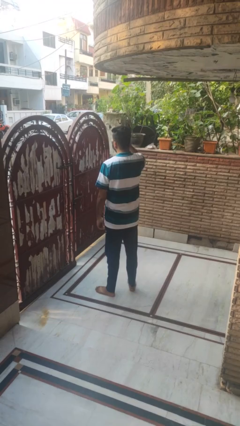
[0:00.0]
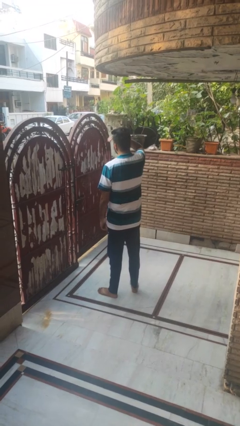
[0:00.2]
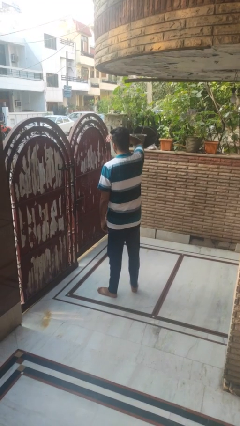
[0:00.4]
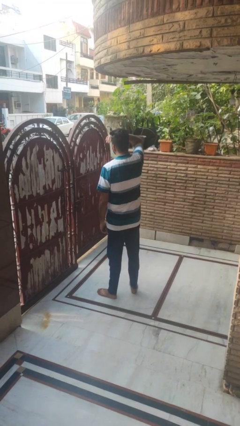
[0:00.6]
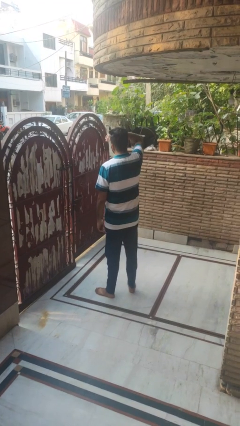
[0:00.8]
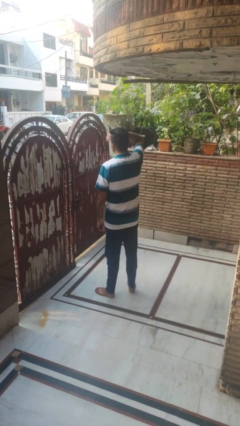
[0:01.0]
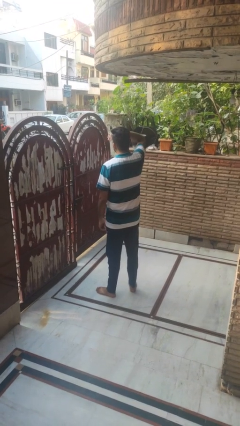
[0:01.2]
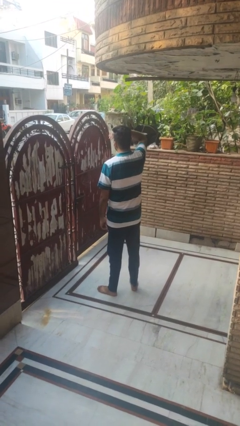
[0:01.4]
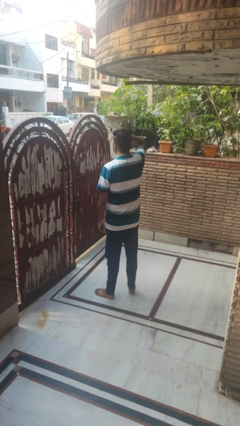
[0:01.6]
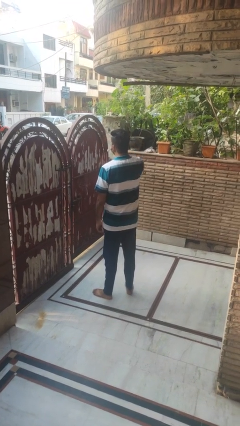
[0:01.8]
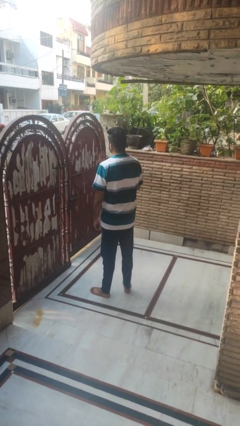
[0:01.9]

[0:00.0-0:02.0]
person shades eyes

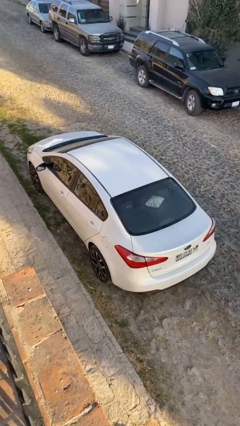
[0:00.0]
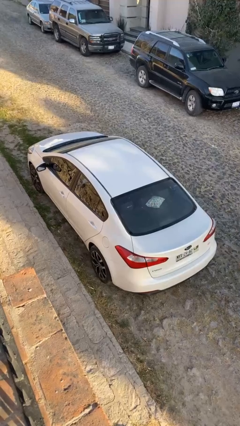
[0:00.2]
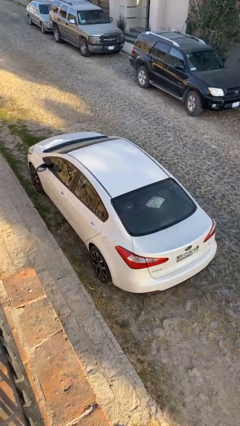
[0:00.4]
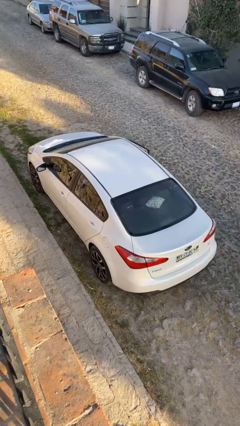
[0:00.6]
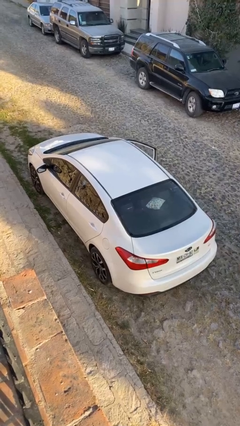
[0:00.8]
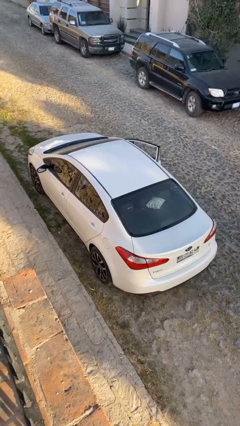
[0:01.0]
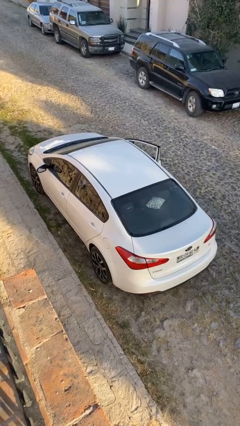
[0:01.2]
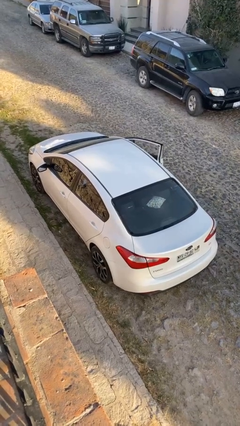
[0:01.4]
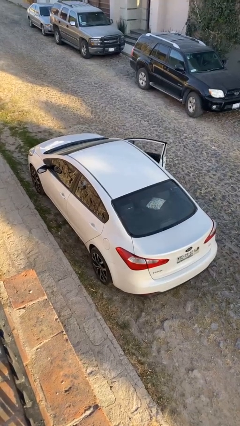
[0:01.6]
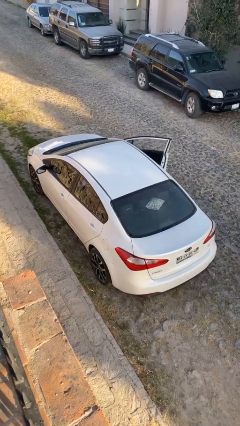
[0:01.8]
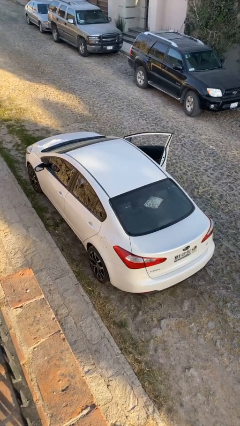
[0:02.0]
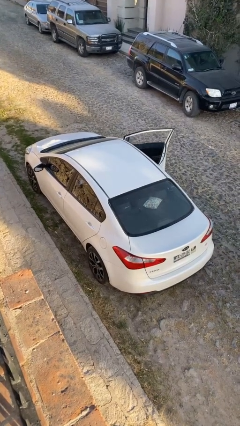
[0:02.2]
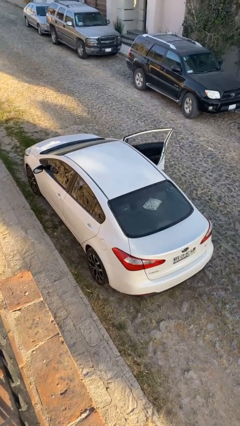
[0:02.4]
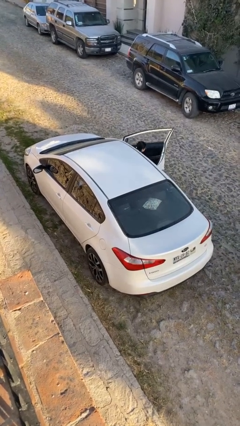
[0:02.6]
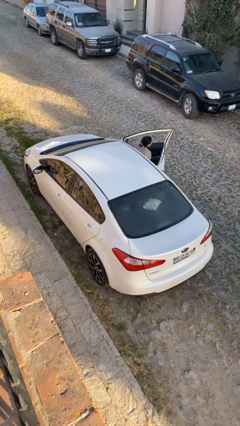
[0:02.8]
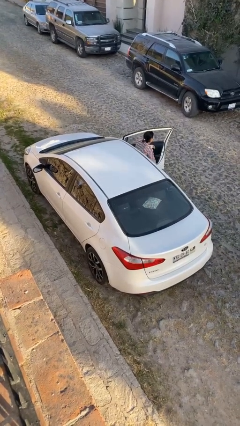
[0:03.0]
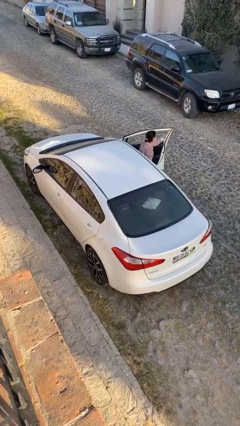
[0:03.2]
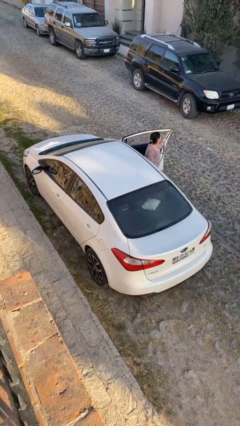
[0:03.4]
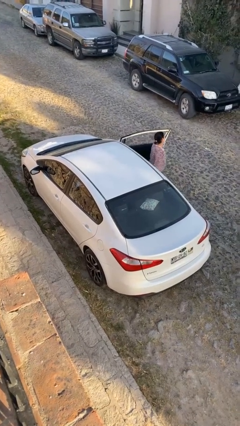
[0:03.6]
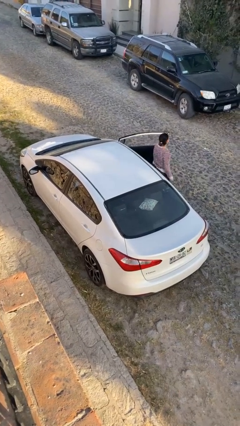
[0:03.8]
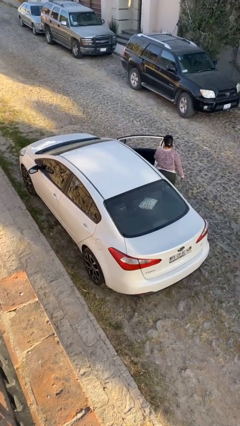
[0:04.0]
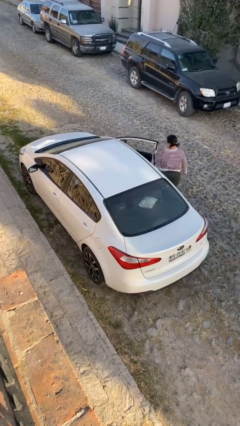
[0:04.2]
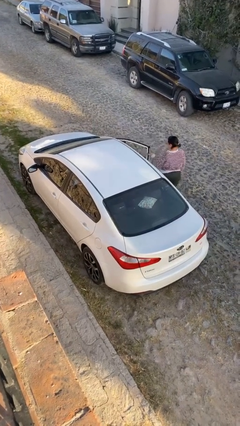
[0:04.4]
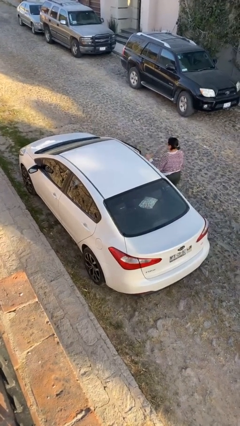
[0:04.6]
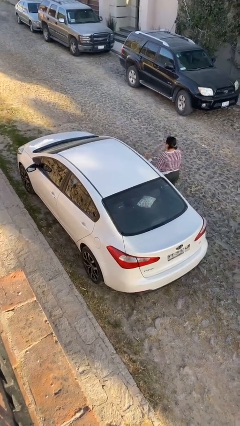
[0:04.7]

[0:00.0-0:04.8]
car drops off person

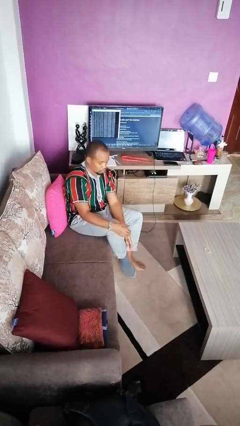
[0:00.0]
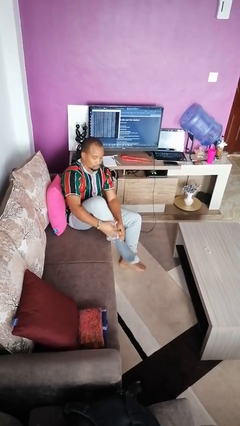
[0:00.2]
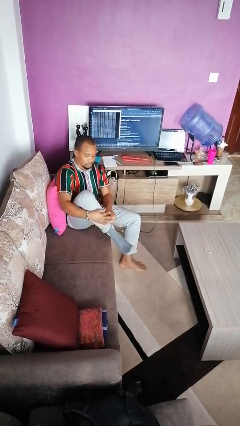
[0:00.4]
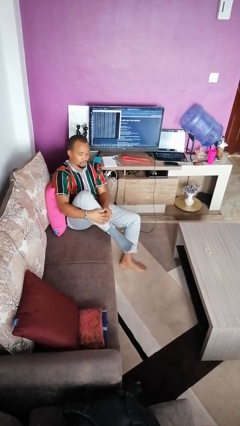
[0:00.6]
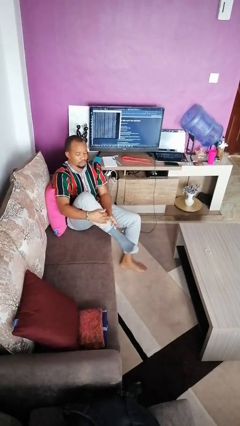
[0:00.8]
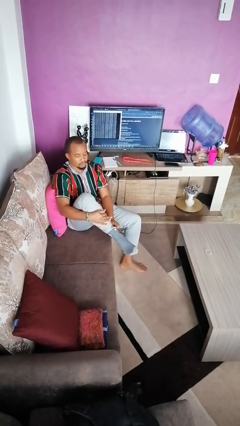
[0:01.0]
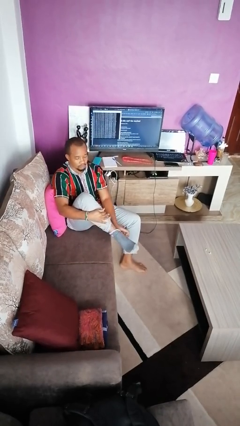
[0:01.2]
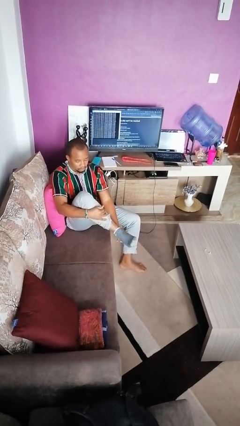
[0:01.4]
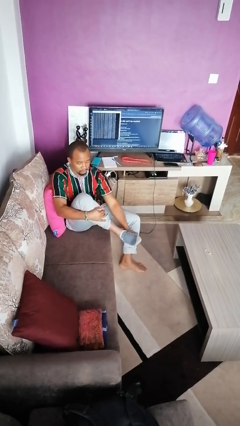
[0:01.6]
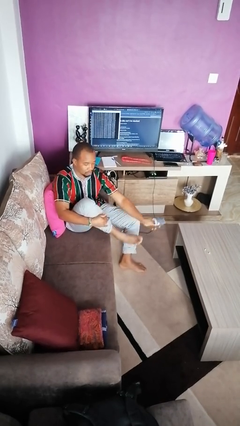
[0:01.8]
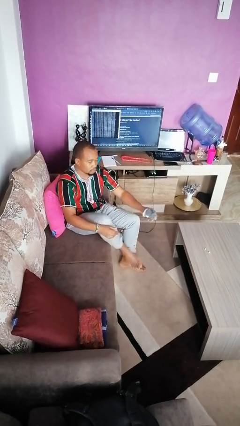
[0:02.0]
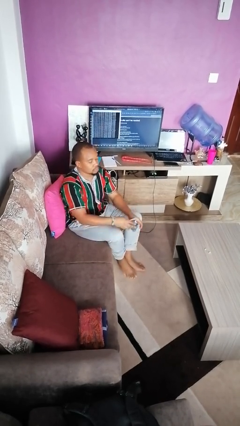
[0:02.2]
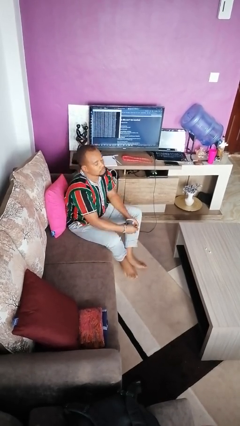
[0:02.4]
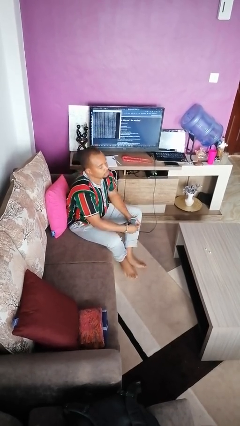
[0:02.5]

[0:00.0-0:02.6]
person takes off socks

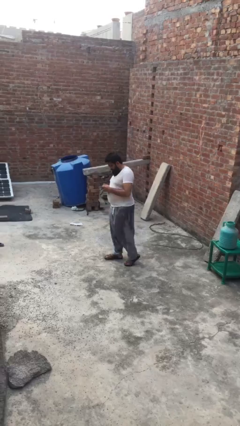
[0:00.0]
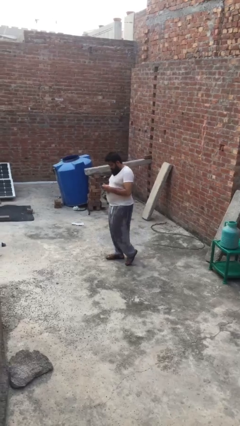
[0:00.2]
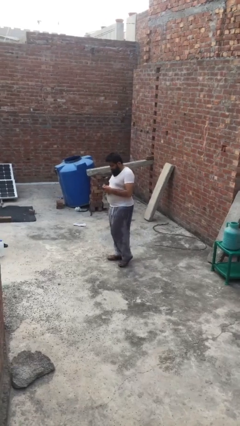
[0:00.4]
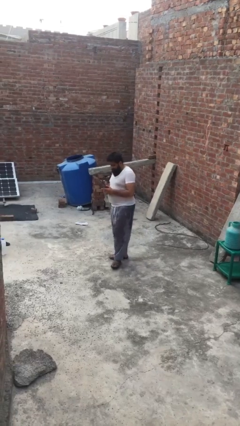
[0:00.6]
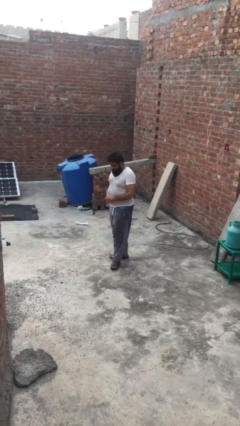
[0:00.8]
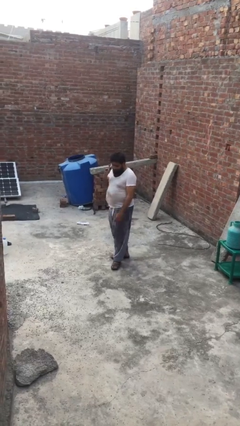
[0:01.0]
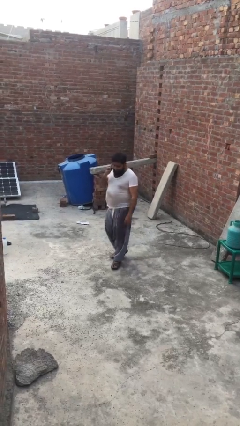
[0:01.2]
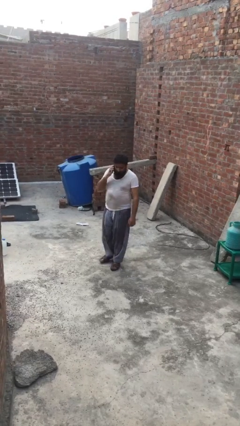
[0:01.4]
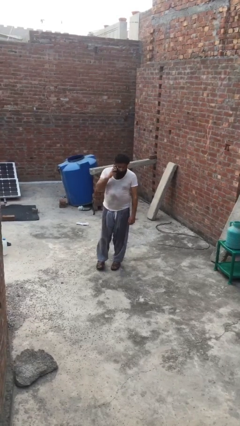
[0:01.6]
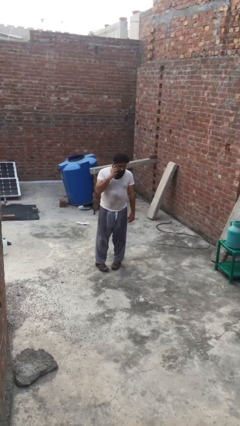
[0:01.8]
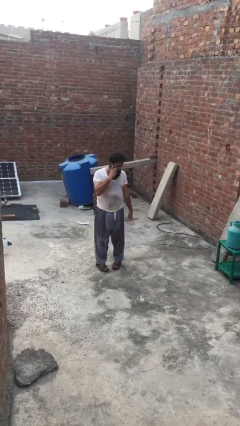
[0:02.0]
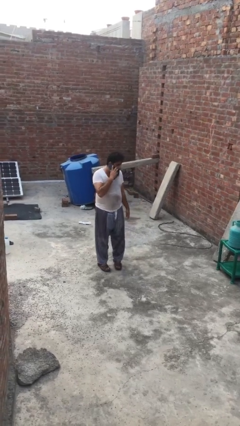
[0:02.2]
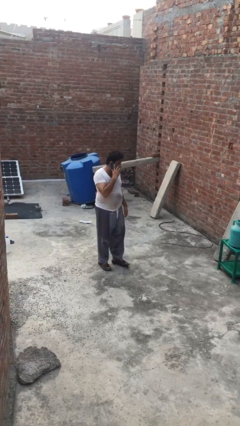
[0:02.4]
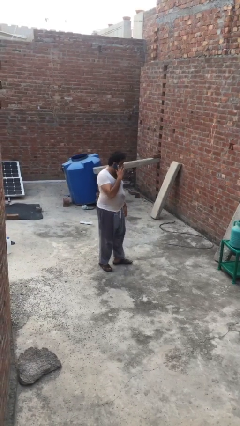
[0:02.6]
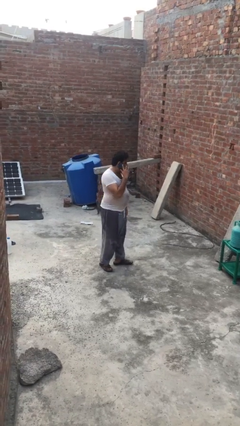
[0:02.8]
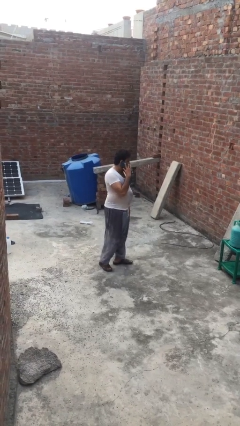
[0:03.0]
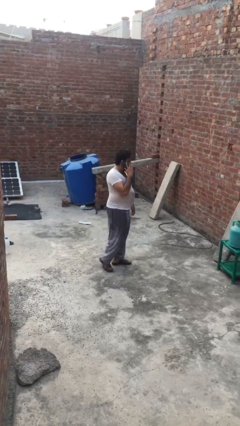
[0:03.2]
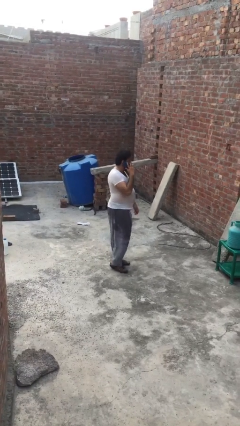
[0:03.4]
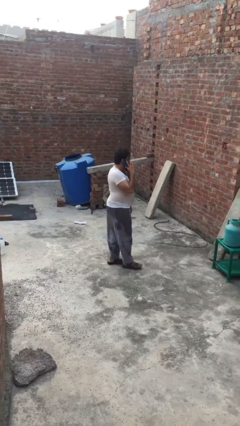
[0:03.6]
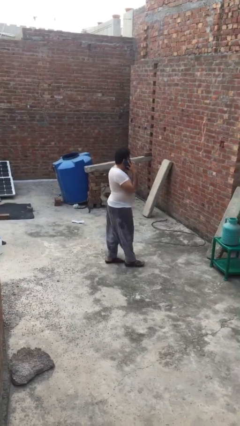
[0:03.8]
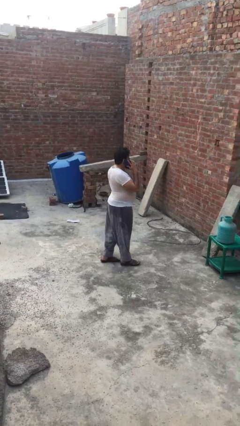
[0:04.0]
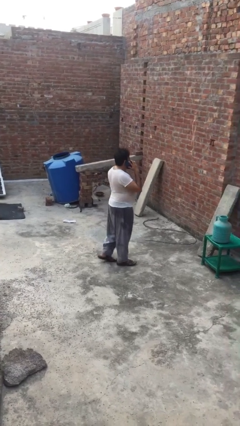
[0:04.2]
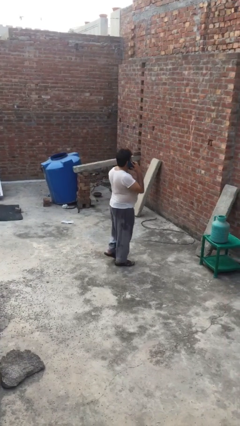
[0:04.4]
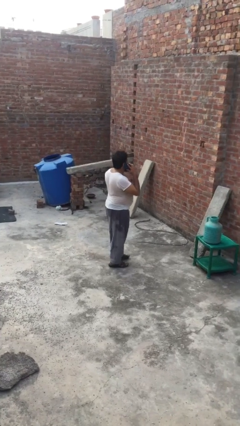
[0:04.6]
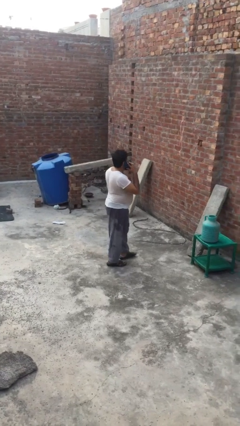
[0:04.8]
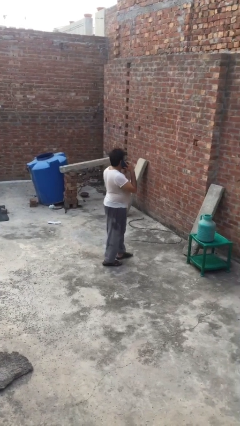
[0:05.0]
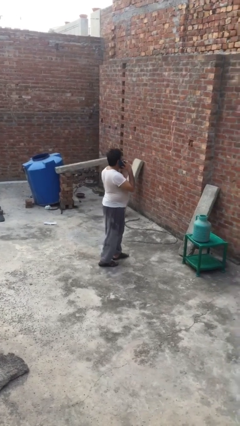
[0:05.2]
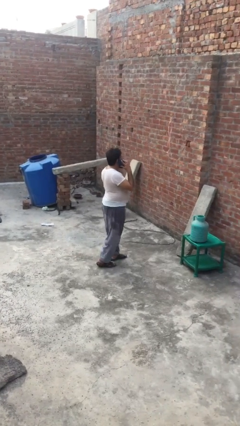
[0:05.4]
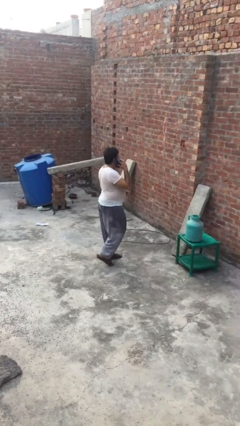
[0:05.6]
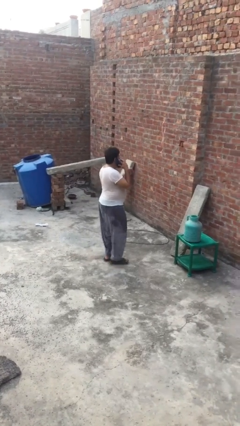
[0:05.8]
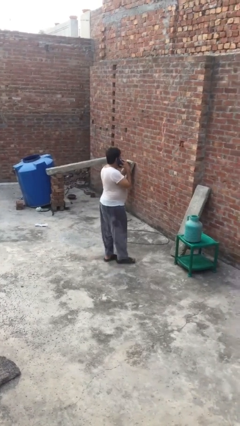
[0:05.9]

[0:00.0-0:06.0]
person talks on phone

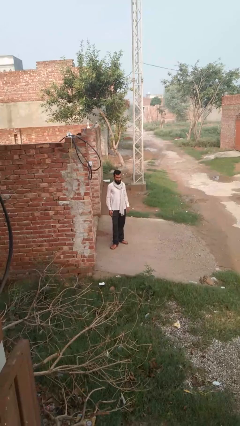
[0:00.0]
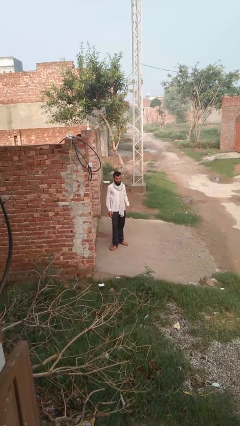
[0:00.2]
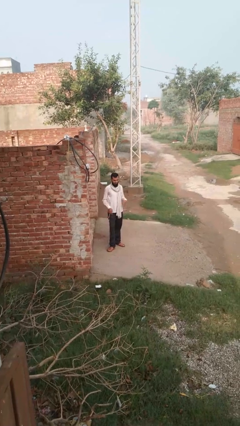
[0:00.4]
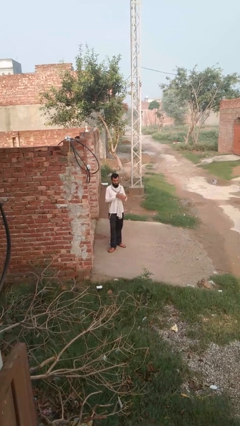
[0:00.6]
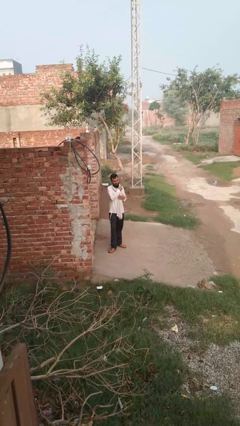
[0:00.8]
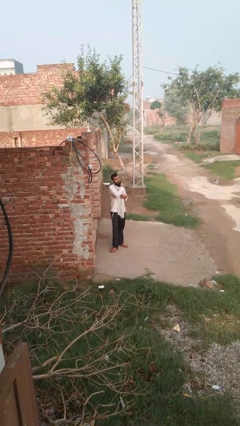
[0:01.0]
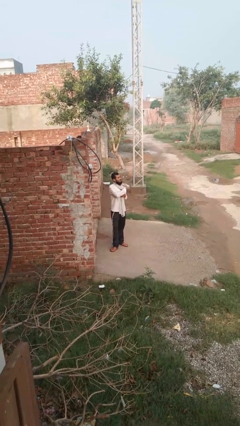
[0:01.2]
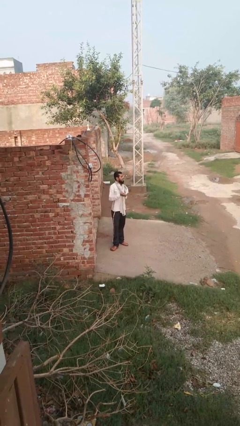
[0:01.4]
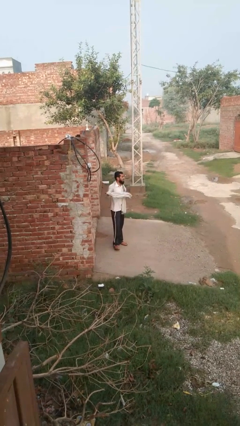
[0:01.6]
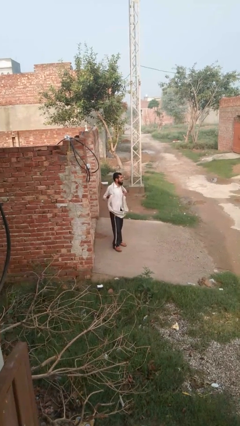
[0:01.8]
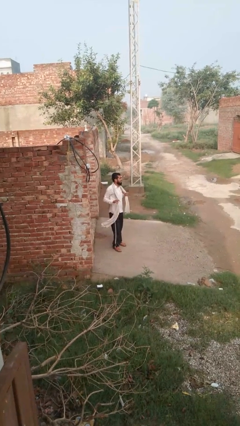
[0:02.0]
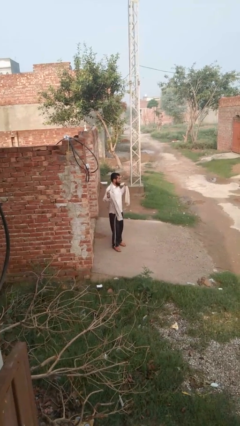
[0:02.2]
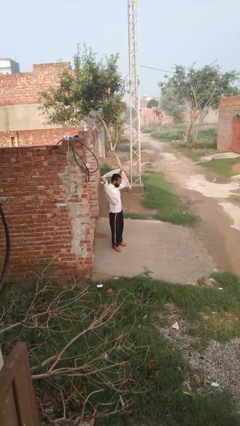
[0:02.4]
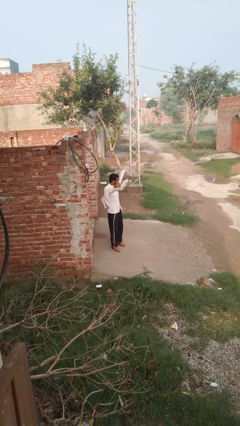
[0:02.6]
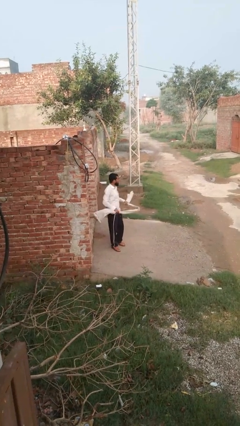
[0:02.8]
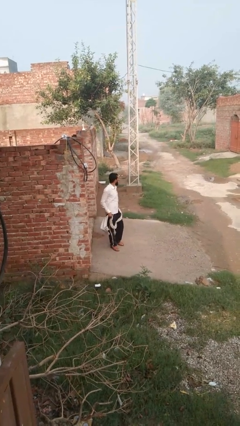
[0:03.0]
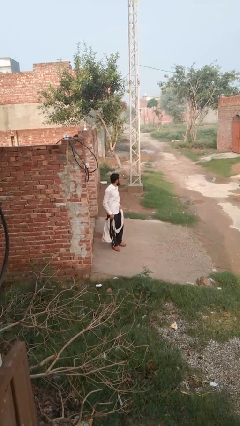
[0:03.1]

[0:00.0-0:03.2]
person takes off scarf
